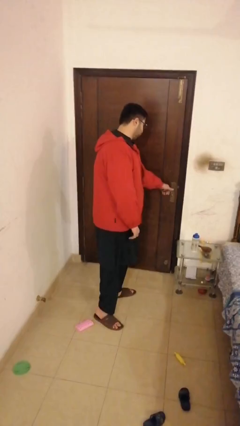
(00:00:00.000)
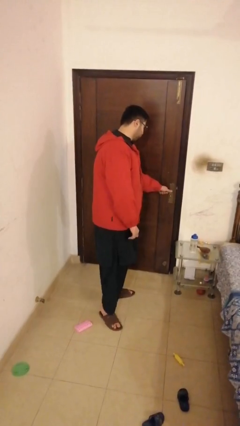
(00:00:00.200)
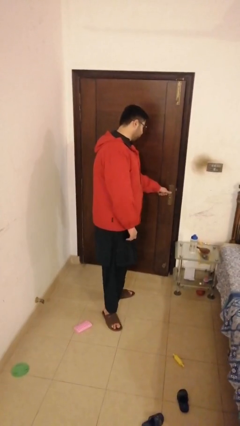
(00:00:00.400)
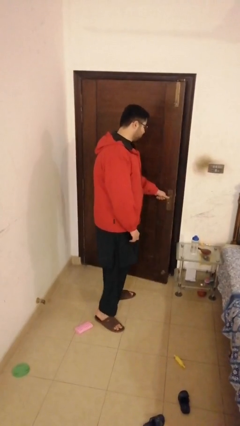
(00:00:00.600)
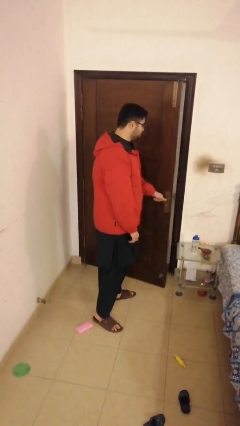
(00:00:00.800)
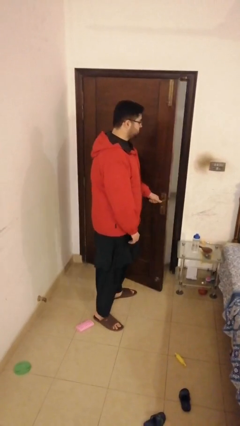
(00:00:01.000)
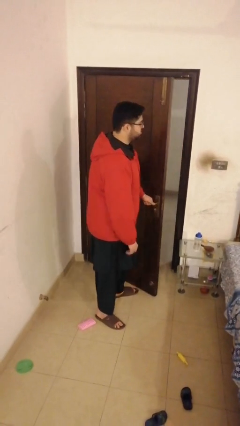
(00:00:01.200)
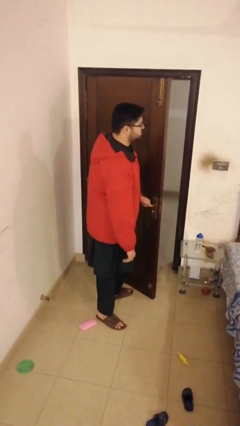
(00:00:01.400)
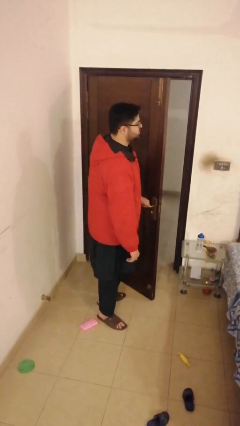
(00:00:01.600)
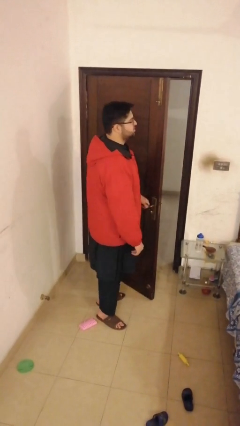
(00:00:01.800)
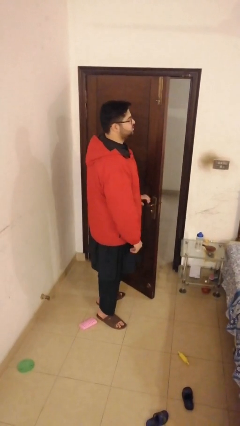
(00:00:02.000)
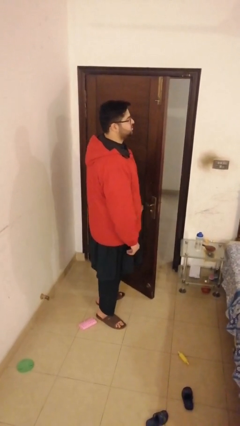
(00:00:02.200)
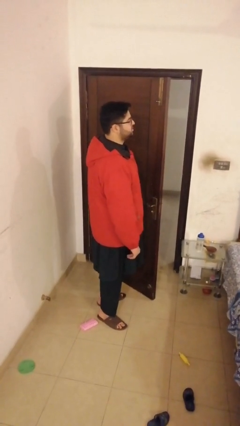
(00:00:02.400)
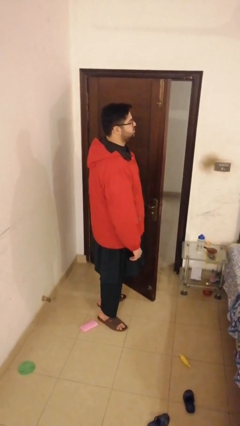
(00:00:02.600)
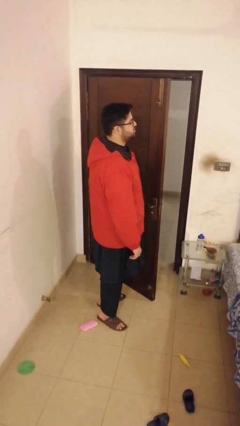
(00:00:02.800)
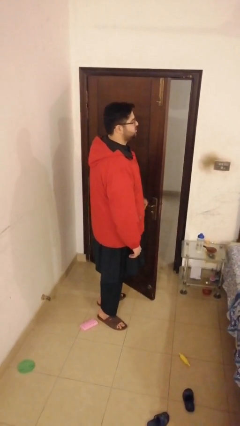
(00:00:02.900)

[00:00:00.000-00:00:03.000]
person opens facility door

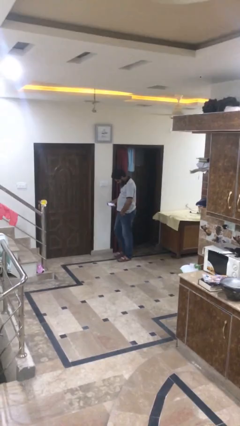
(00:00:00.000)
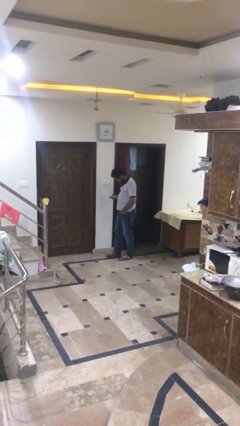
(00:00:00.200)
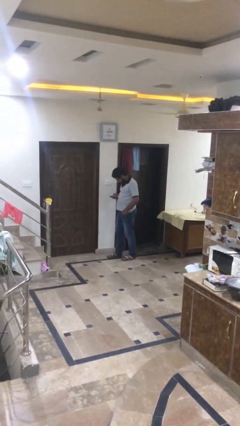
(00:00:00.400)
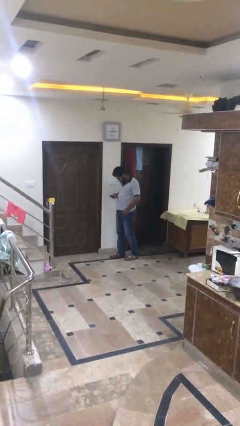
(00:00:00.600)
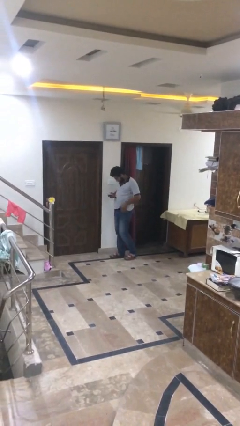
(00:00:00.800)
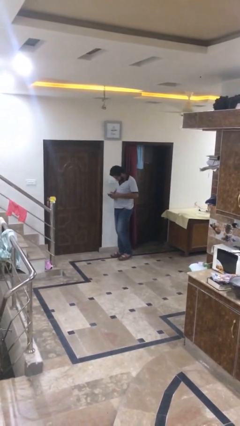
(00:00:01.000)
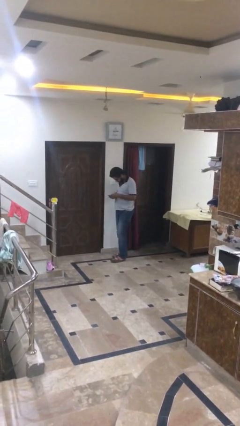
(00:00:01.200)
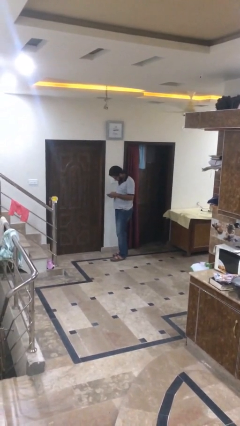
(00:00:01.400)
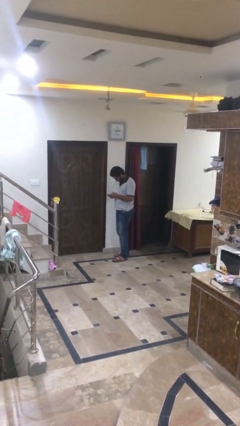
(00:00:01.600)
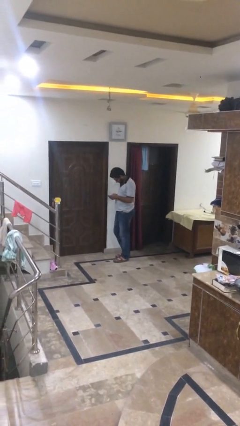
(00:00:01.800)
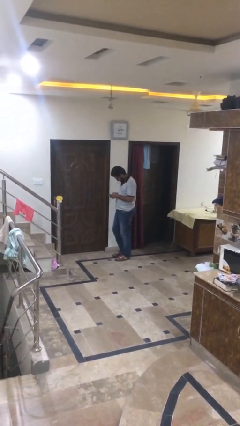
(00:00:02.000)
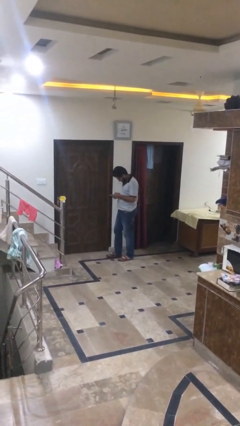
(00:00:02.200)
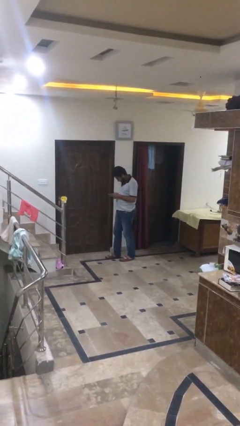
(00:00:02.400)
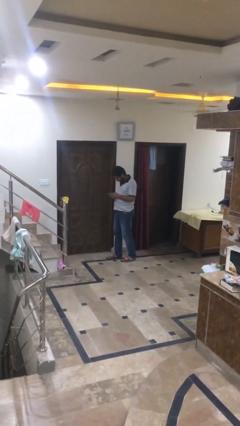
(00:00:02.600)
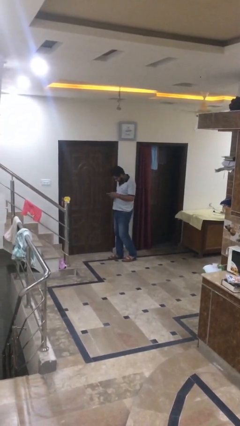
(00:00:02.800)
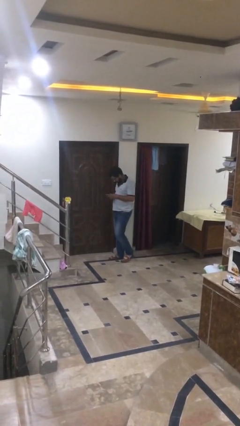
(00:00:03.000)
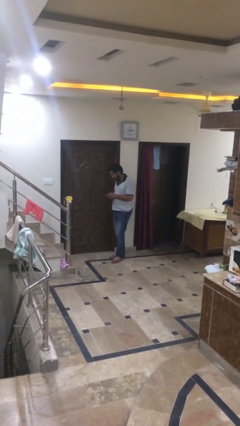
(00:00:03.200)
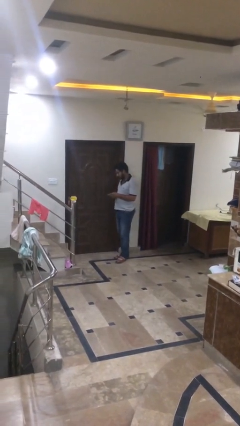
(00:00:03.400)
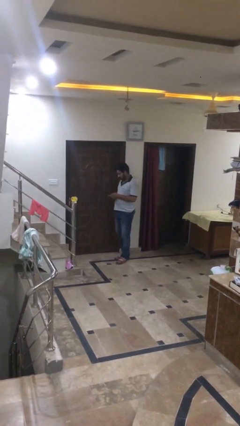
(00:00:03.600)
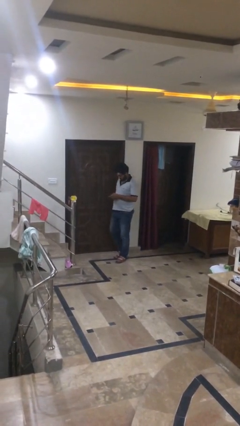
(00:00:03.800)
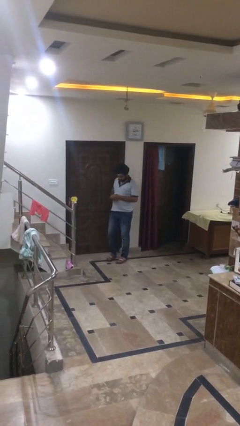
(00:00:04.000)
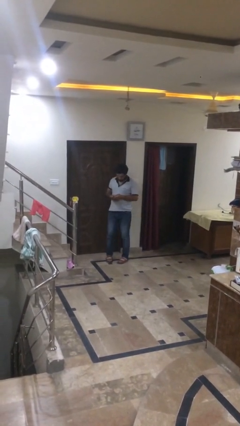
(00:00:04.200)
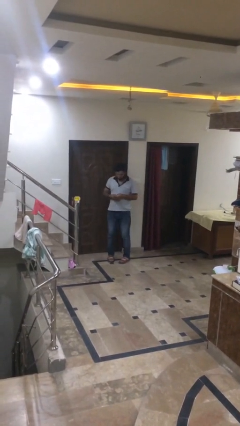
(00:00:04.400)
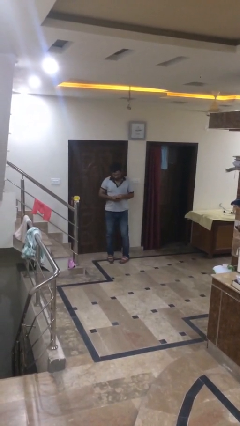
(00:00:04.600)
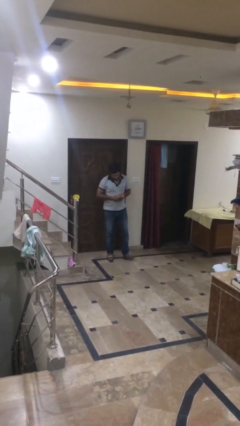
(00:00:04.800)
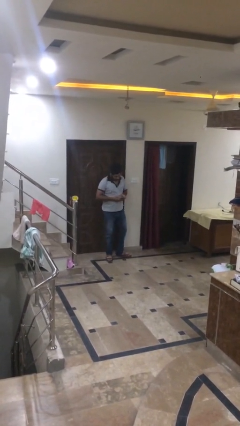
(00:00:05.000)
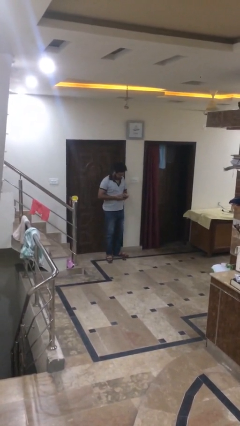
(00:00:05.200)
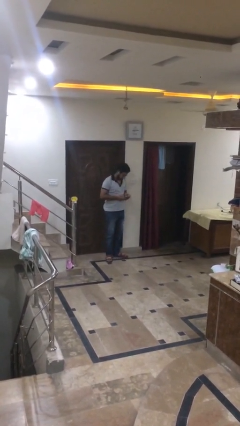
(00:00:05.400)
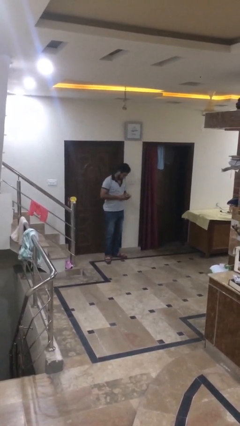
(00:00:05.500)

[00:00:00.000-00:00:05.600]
person texts on phone

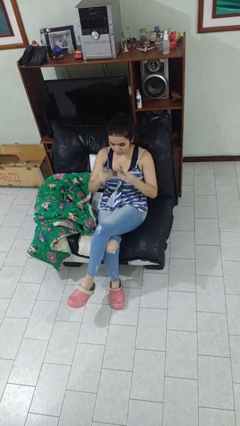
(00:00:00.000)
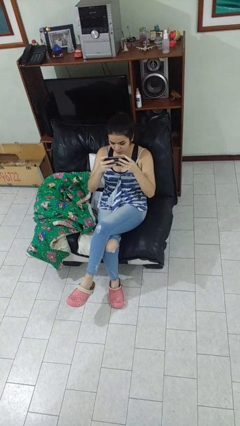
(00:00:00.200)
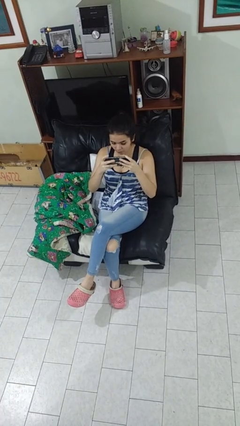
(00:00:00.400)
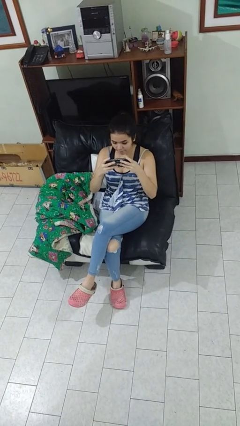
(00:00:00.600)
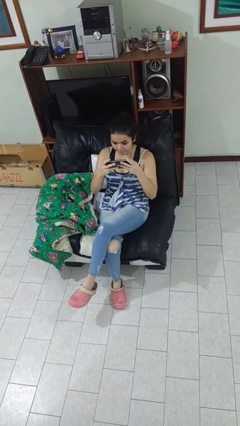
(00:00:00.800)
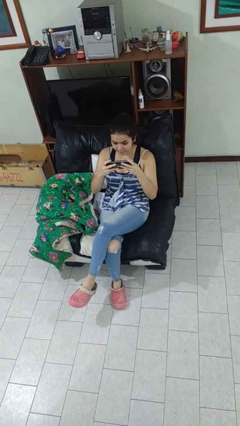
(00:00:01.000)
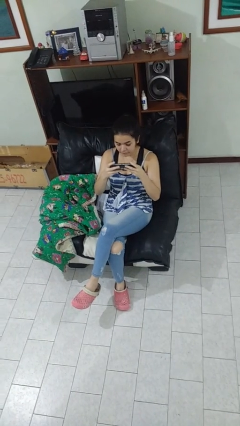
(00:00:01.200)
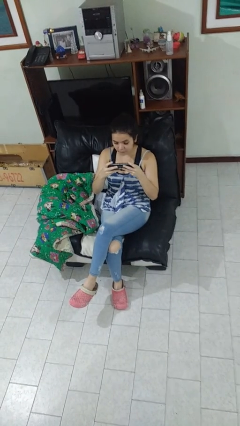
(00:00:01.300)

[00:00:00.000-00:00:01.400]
person interacts with handheld game

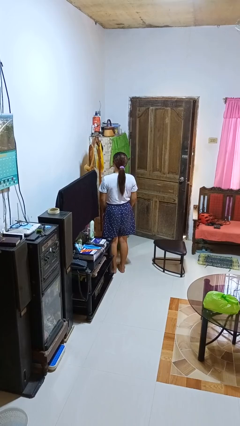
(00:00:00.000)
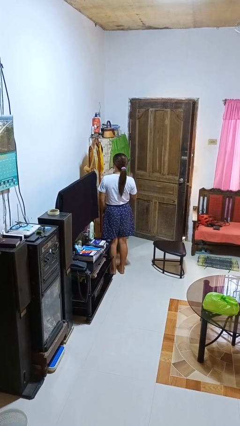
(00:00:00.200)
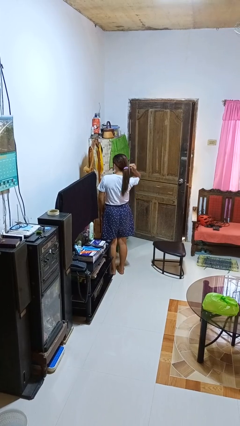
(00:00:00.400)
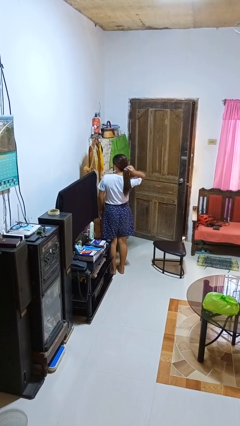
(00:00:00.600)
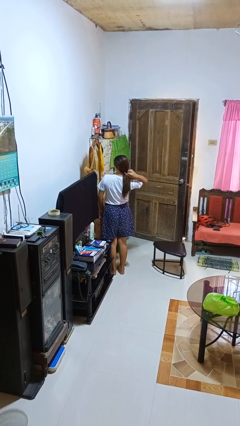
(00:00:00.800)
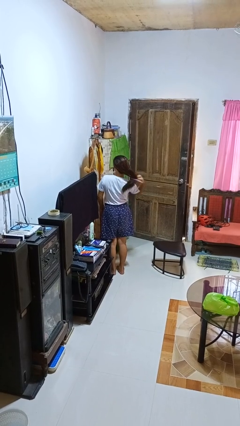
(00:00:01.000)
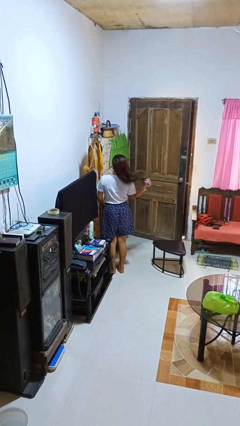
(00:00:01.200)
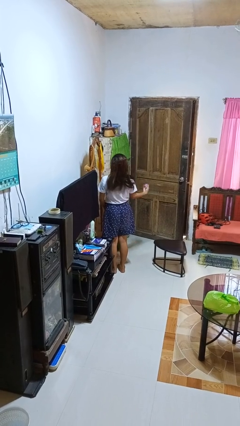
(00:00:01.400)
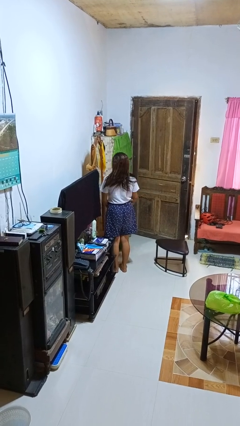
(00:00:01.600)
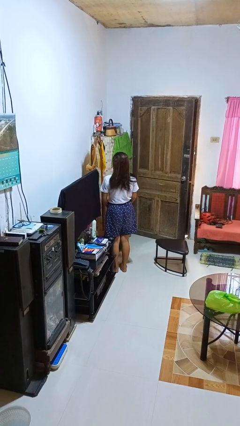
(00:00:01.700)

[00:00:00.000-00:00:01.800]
person takes off hairtie

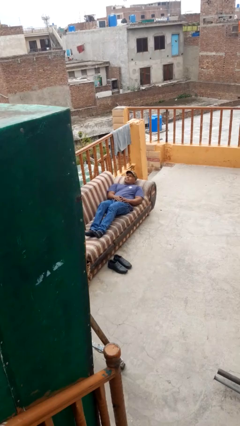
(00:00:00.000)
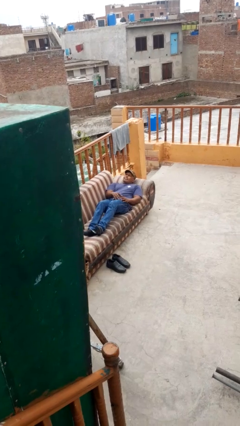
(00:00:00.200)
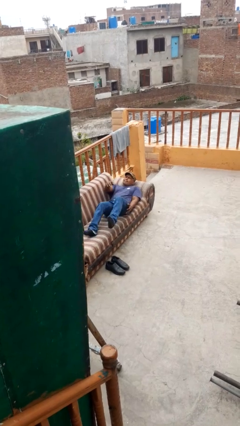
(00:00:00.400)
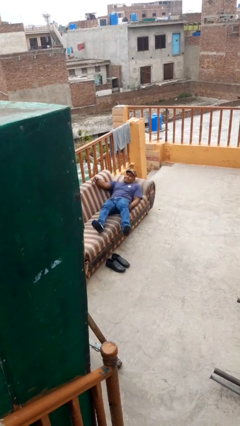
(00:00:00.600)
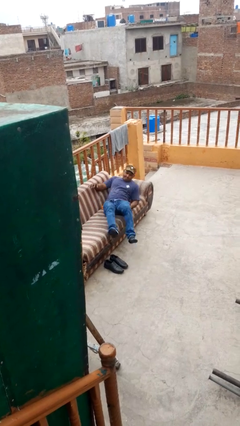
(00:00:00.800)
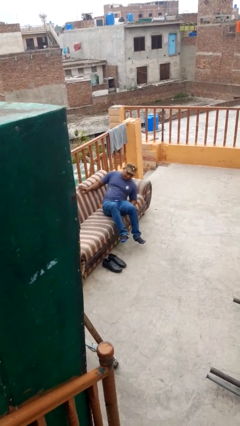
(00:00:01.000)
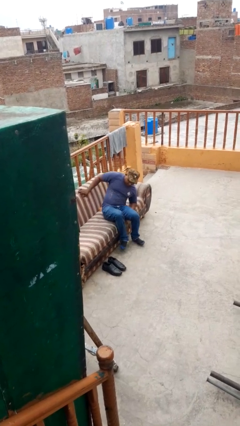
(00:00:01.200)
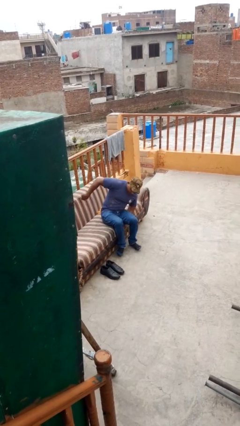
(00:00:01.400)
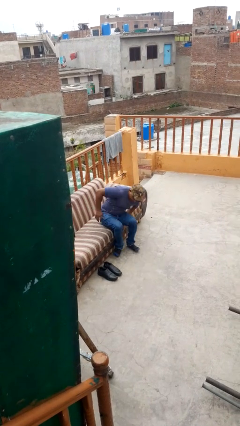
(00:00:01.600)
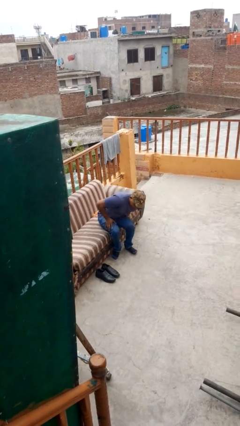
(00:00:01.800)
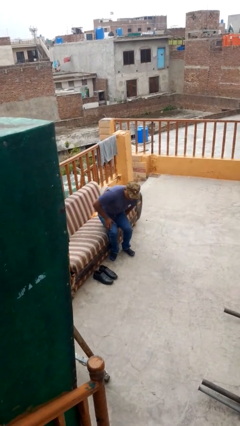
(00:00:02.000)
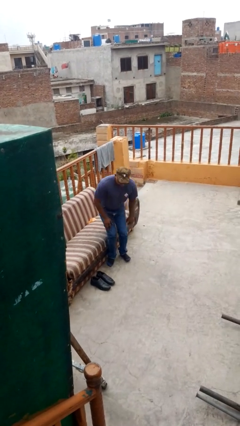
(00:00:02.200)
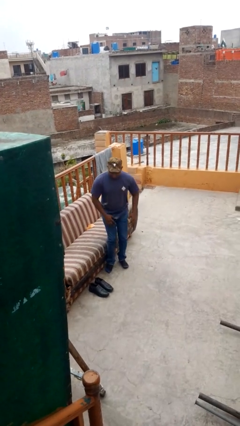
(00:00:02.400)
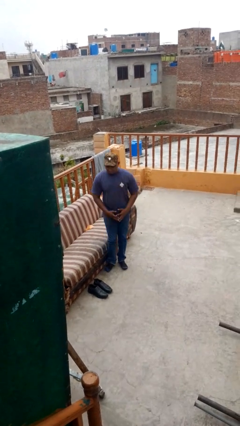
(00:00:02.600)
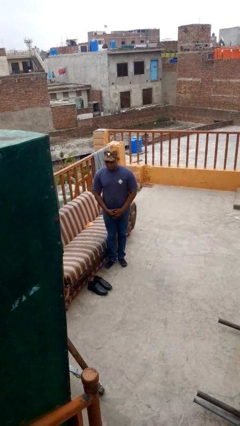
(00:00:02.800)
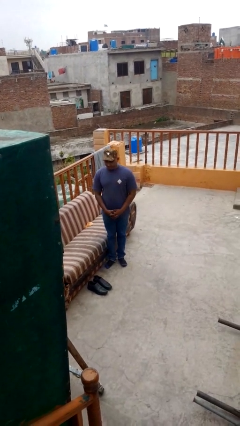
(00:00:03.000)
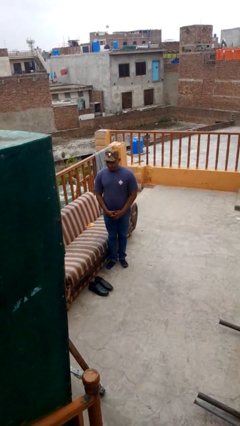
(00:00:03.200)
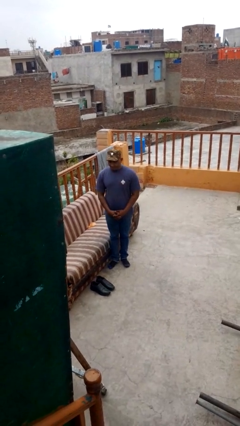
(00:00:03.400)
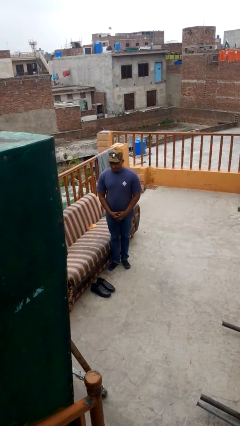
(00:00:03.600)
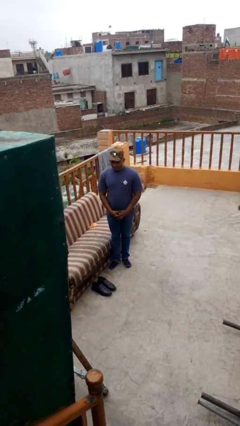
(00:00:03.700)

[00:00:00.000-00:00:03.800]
person stands up

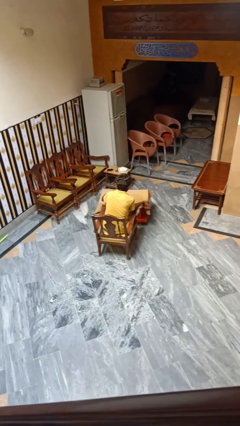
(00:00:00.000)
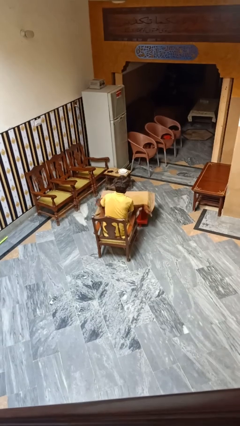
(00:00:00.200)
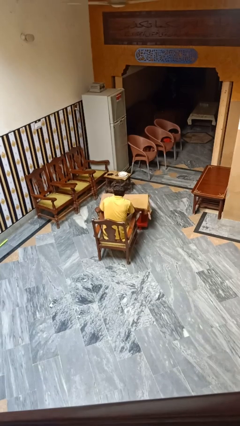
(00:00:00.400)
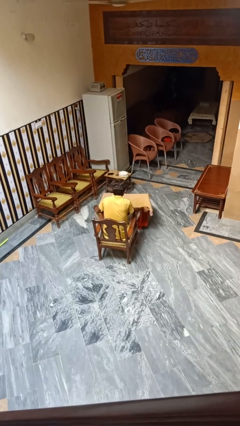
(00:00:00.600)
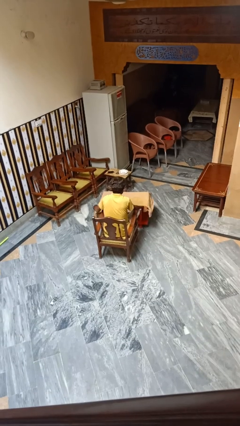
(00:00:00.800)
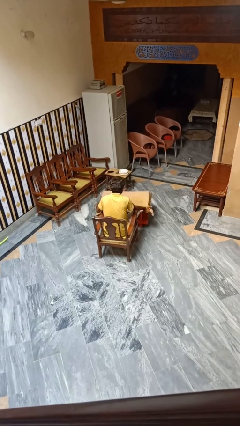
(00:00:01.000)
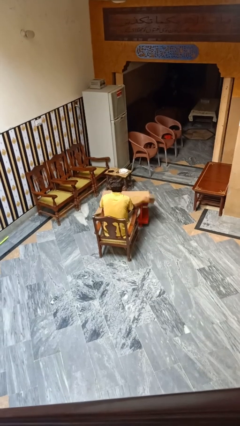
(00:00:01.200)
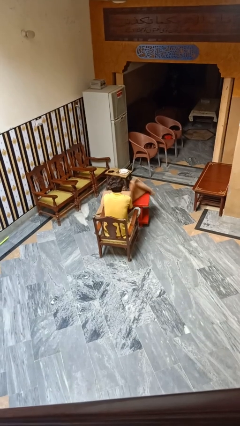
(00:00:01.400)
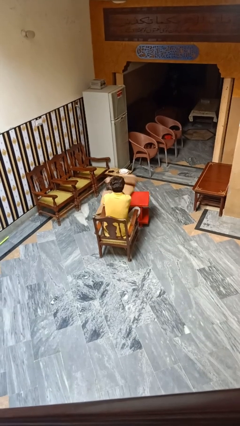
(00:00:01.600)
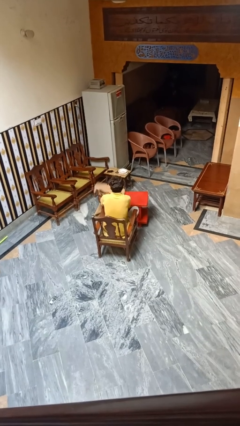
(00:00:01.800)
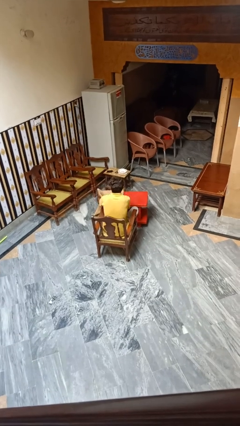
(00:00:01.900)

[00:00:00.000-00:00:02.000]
person folds tablecloth
